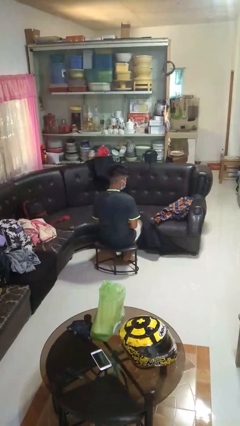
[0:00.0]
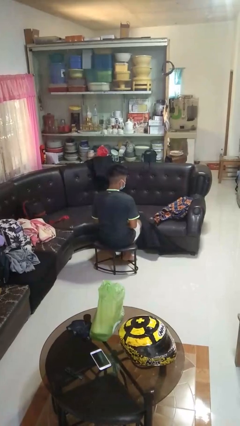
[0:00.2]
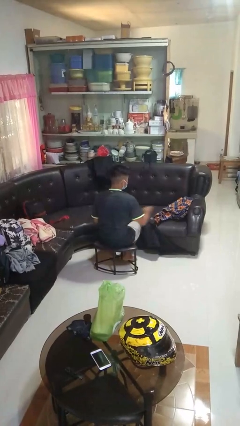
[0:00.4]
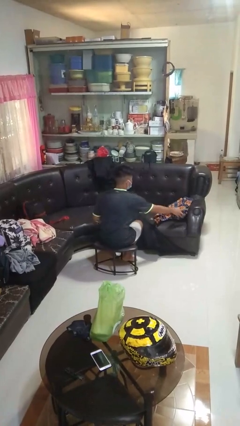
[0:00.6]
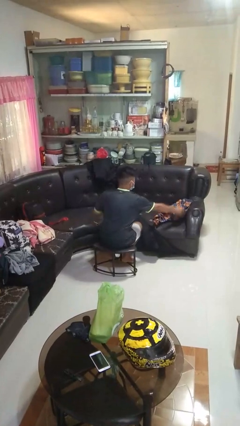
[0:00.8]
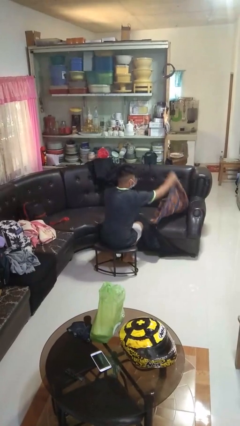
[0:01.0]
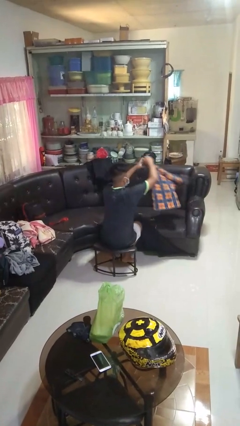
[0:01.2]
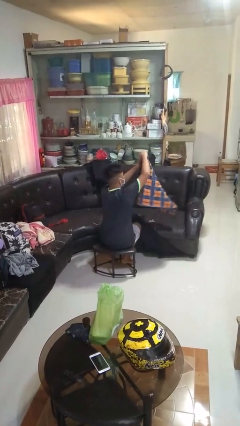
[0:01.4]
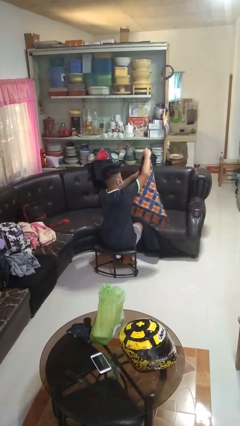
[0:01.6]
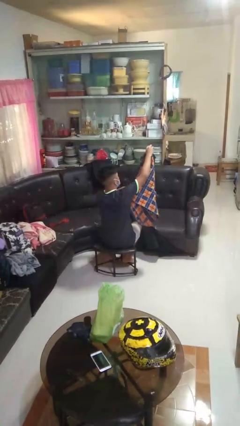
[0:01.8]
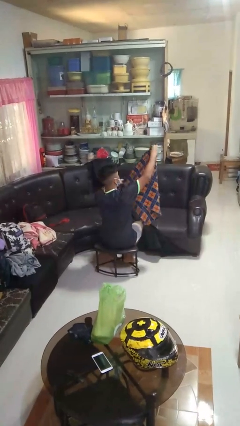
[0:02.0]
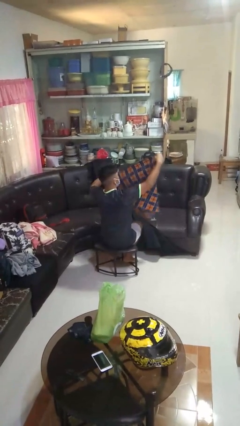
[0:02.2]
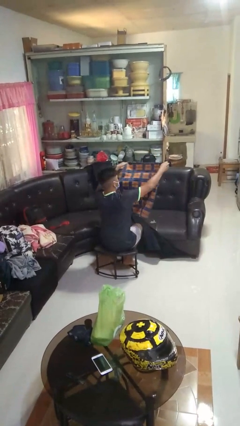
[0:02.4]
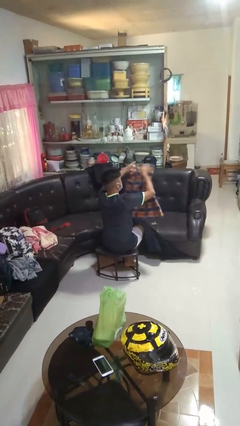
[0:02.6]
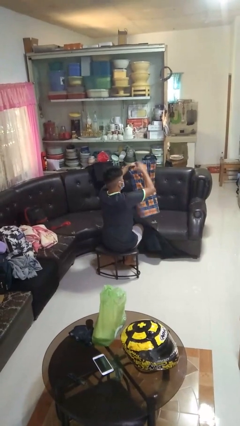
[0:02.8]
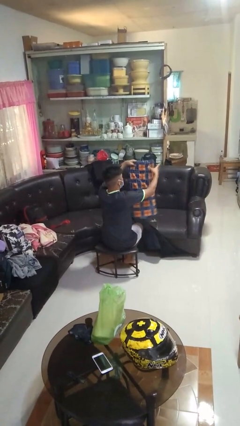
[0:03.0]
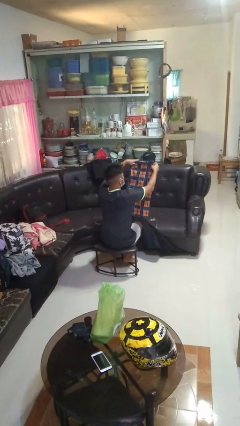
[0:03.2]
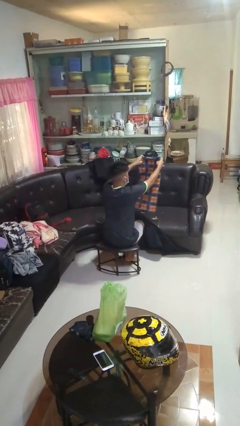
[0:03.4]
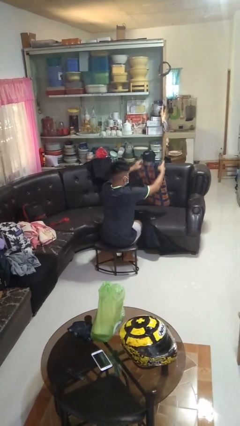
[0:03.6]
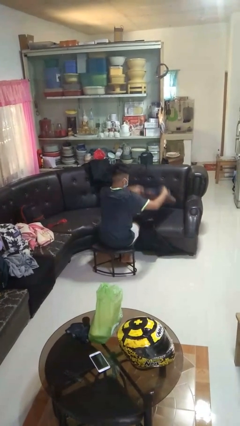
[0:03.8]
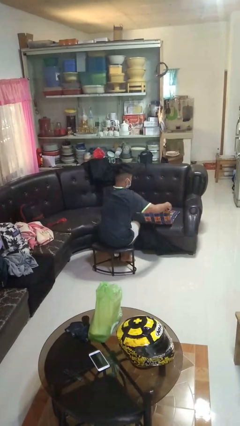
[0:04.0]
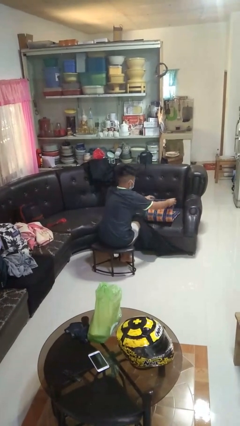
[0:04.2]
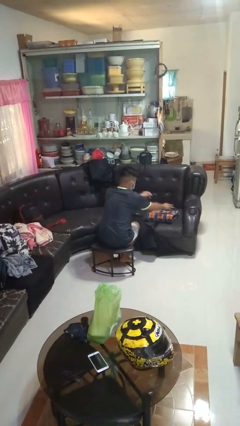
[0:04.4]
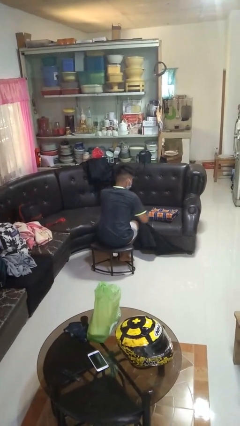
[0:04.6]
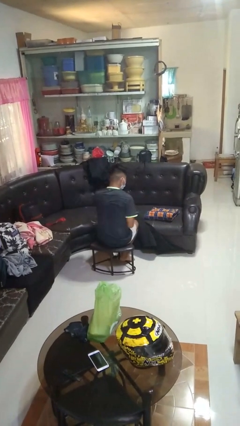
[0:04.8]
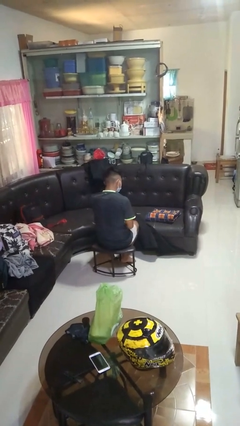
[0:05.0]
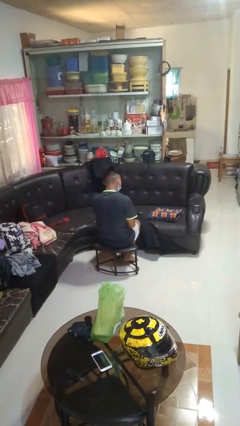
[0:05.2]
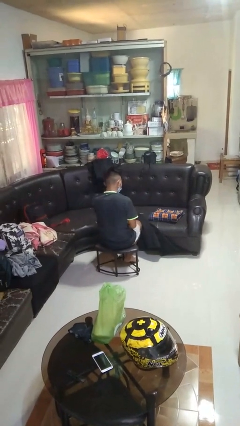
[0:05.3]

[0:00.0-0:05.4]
person folds blanket

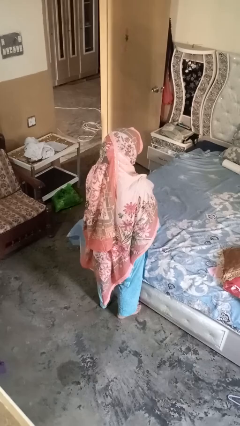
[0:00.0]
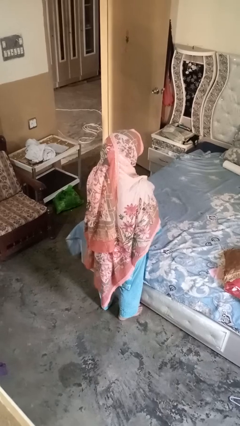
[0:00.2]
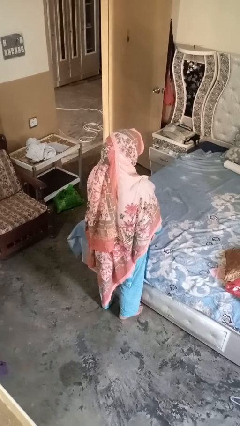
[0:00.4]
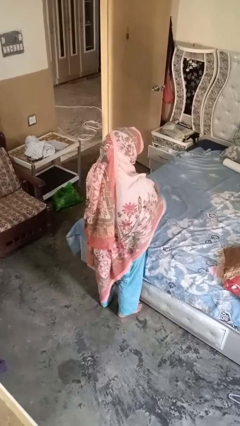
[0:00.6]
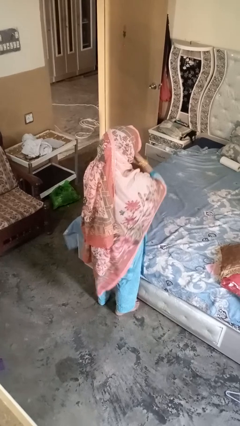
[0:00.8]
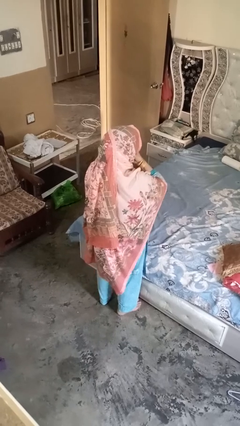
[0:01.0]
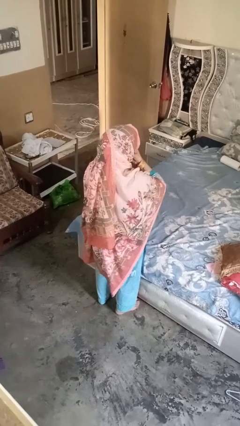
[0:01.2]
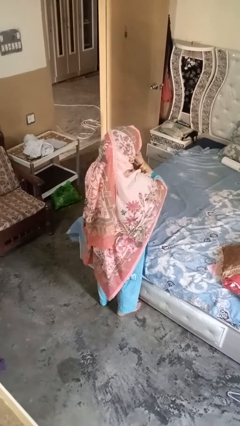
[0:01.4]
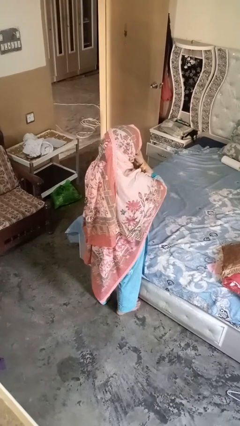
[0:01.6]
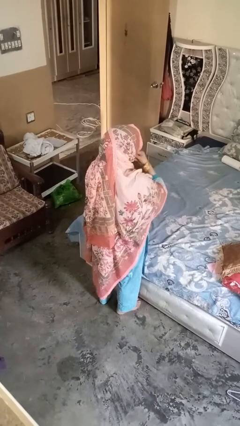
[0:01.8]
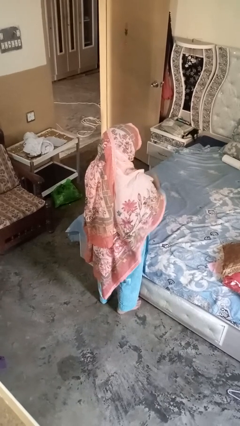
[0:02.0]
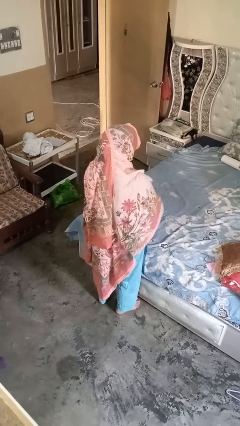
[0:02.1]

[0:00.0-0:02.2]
person strokes chin

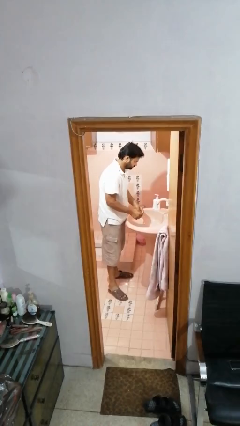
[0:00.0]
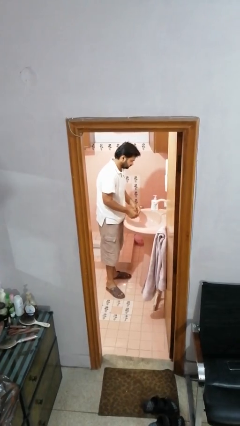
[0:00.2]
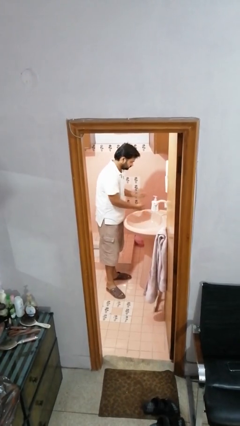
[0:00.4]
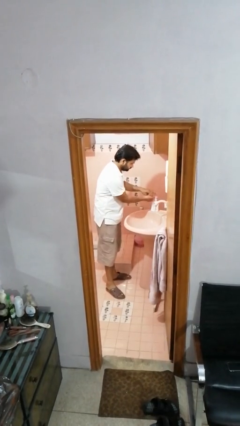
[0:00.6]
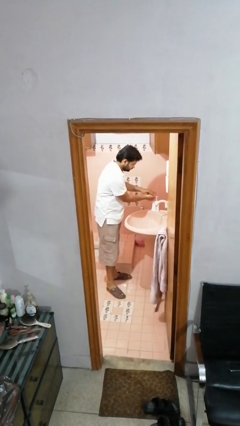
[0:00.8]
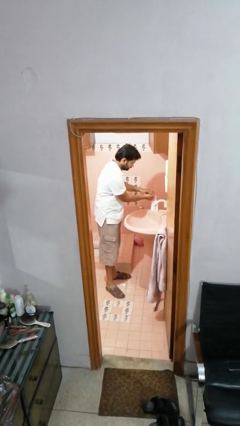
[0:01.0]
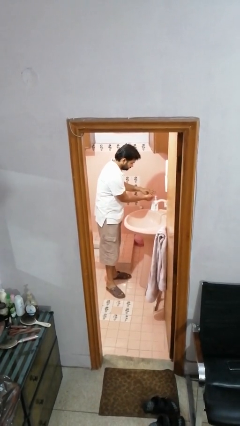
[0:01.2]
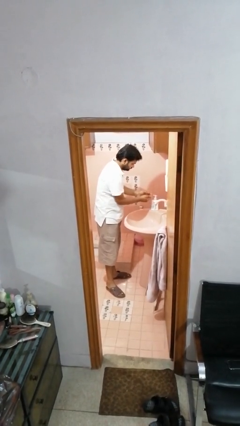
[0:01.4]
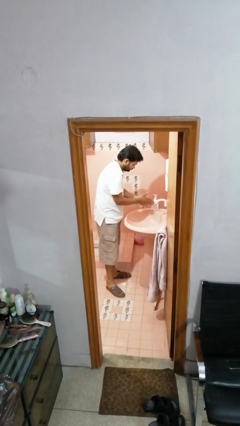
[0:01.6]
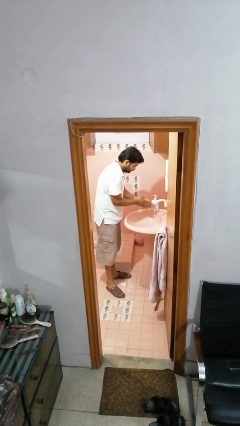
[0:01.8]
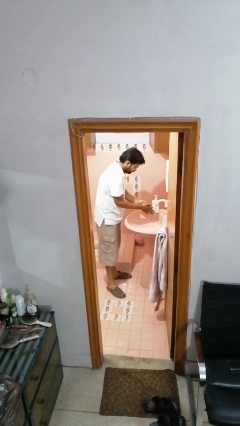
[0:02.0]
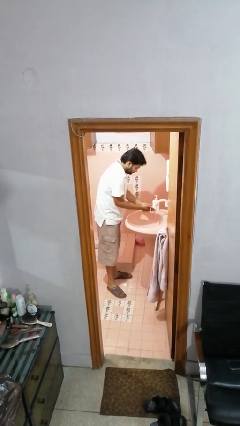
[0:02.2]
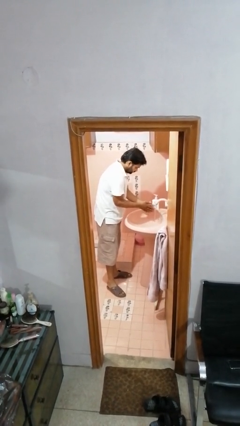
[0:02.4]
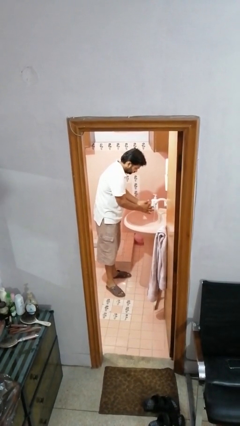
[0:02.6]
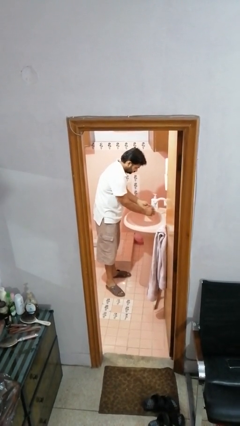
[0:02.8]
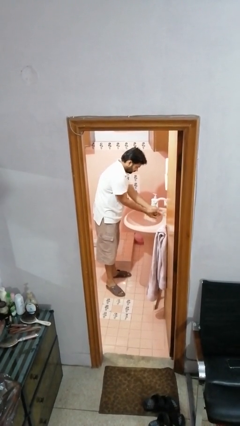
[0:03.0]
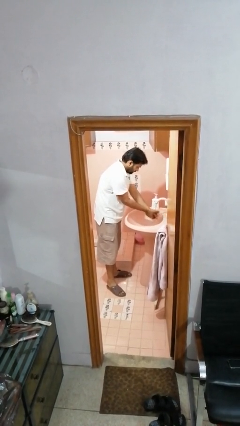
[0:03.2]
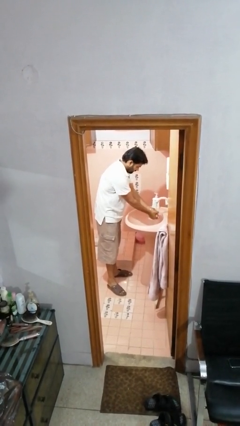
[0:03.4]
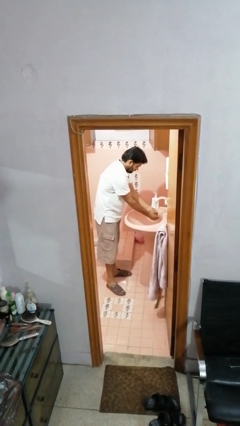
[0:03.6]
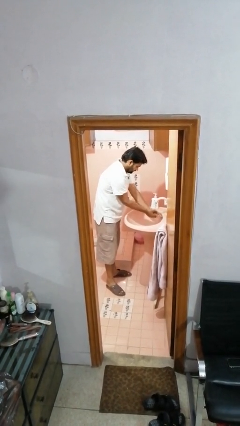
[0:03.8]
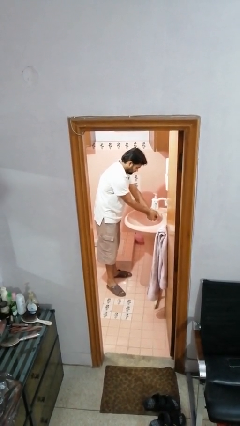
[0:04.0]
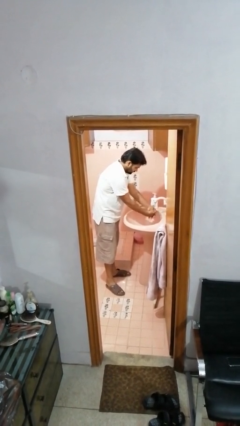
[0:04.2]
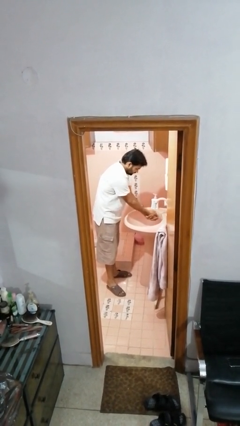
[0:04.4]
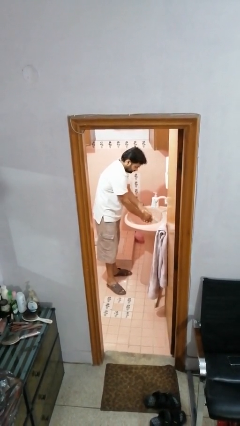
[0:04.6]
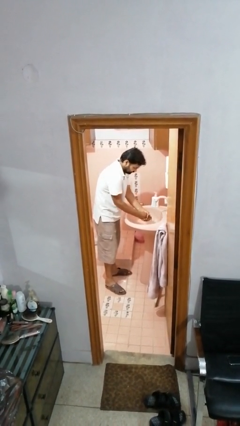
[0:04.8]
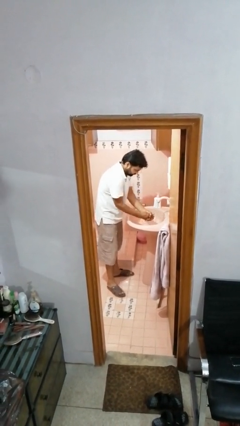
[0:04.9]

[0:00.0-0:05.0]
person washes hands

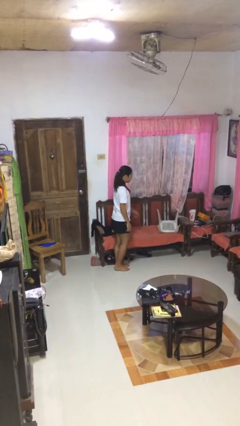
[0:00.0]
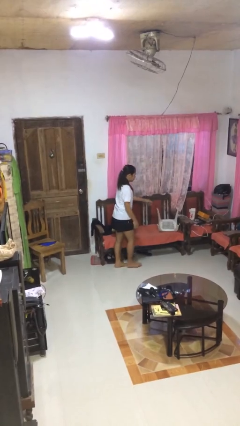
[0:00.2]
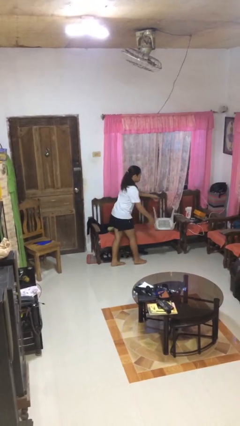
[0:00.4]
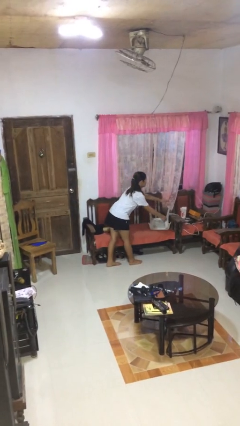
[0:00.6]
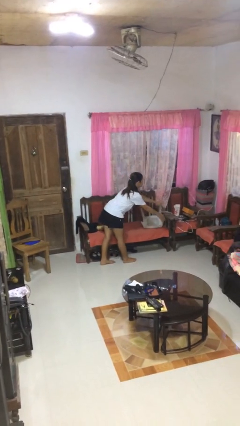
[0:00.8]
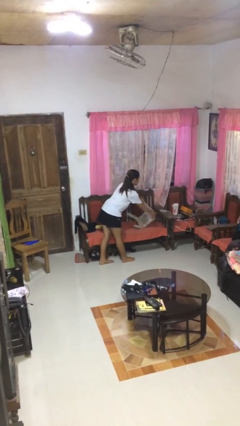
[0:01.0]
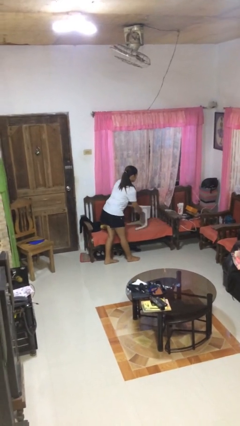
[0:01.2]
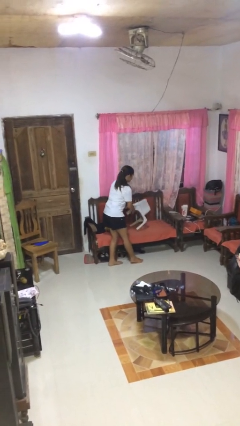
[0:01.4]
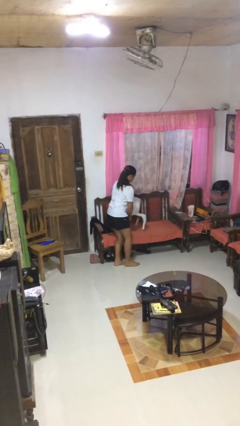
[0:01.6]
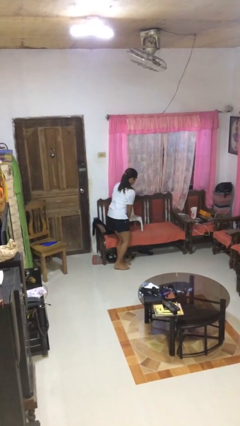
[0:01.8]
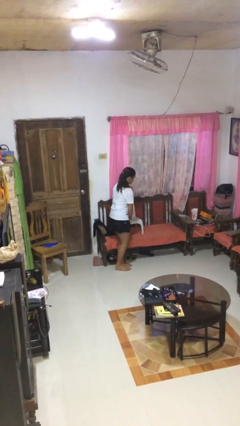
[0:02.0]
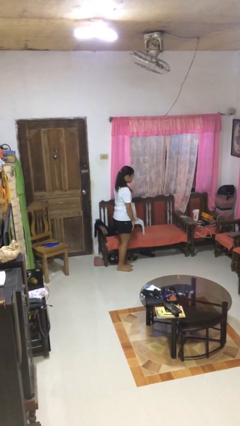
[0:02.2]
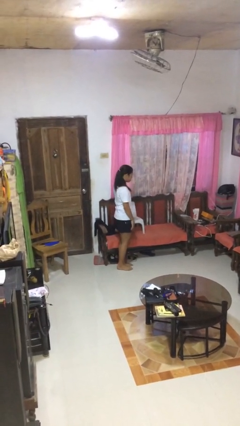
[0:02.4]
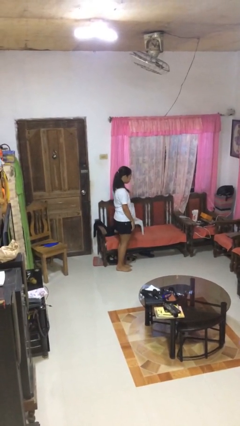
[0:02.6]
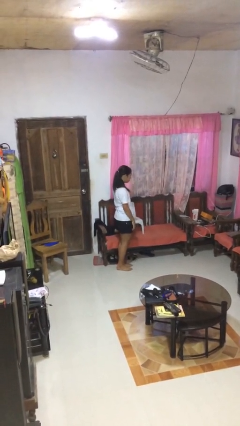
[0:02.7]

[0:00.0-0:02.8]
person sets upright furniture

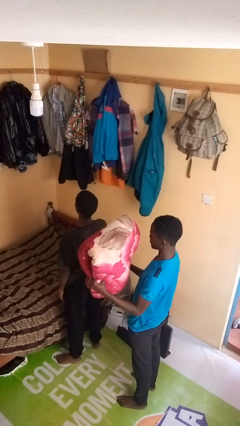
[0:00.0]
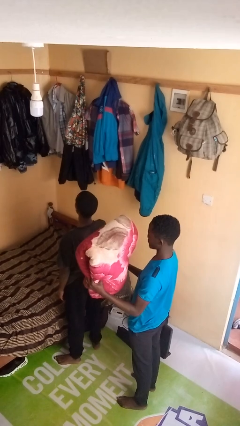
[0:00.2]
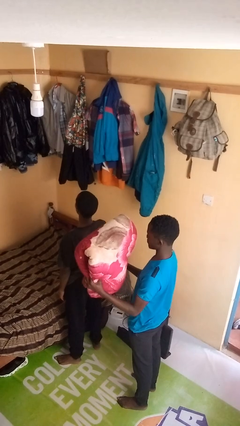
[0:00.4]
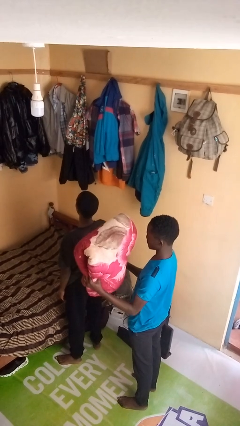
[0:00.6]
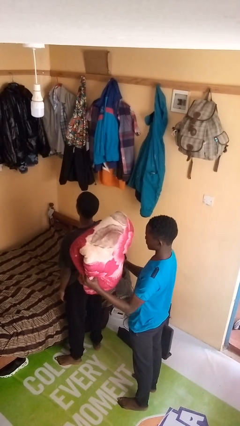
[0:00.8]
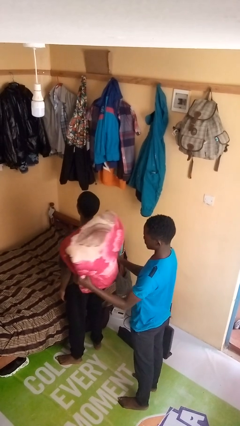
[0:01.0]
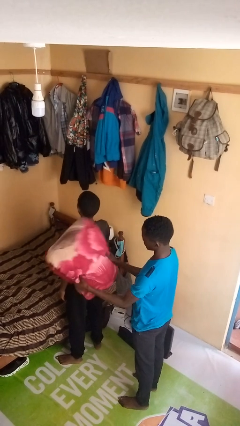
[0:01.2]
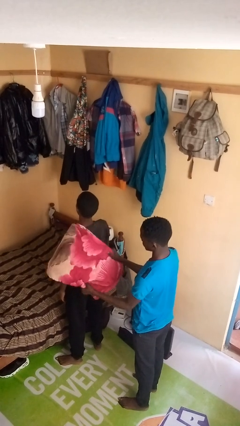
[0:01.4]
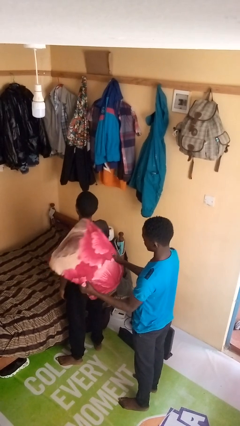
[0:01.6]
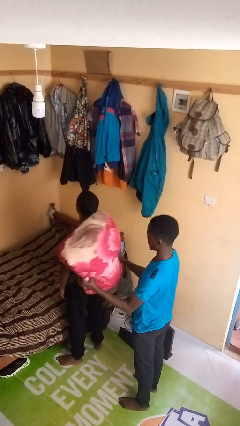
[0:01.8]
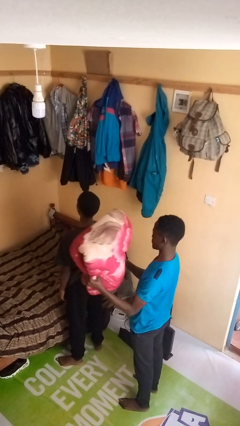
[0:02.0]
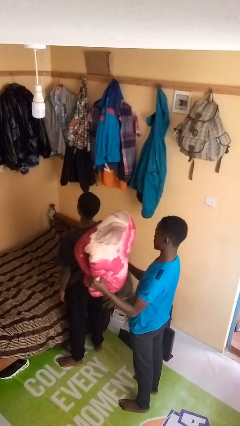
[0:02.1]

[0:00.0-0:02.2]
person hits person with pillow
